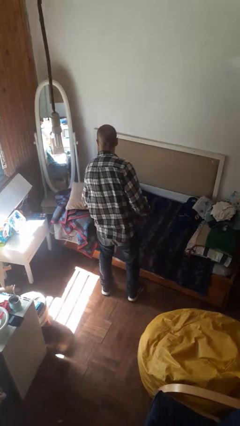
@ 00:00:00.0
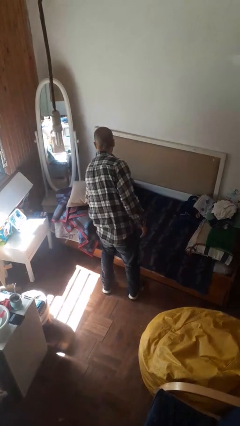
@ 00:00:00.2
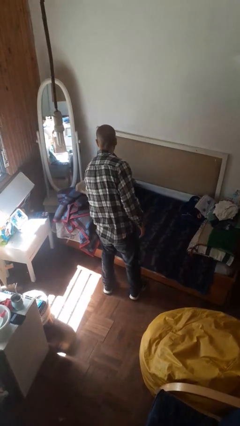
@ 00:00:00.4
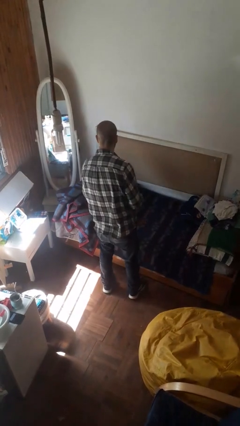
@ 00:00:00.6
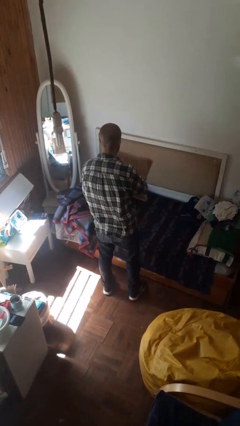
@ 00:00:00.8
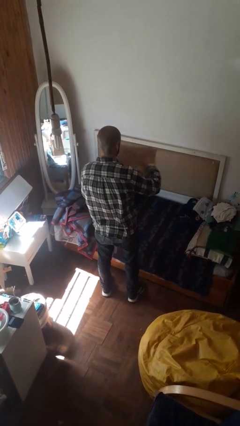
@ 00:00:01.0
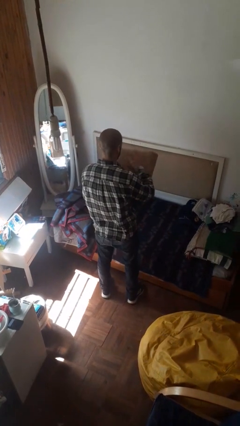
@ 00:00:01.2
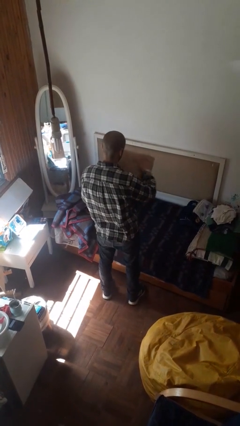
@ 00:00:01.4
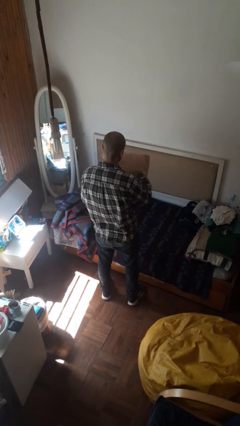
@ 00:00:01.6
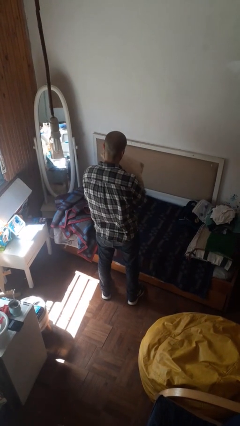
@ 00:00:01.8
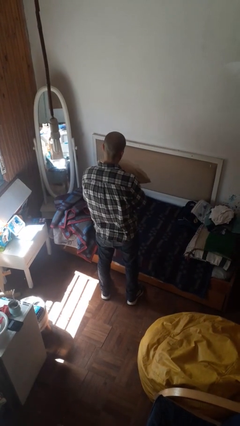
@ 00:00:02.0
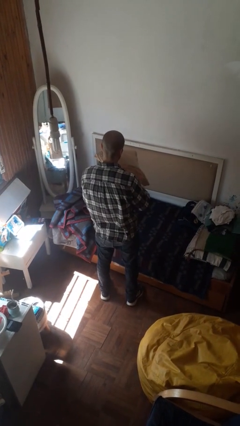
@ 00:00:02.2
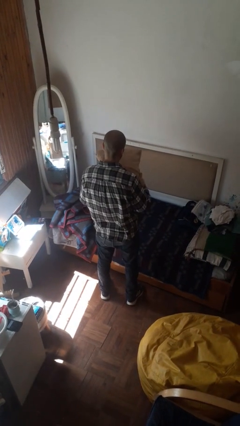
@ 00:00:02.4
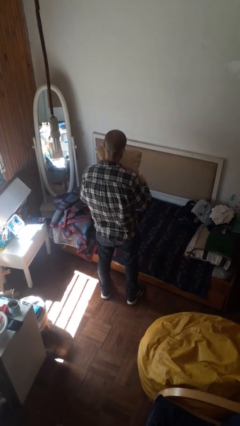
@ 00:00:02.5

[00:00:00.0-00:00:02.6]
person picks up object from bed

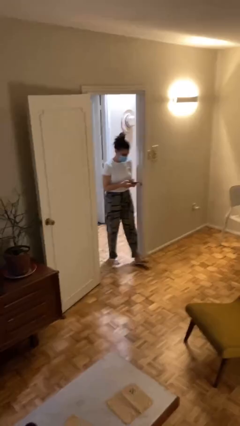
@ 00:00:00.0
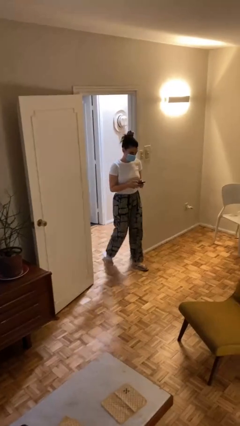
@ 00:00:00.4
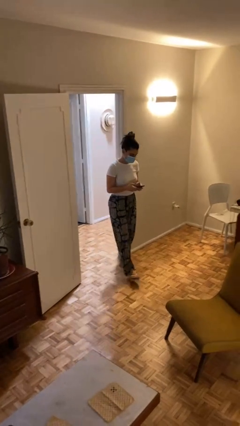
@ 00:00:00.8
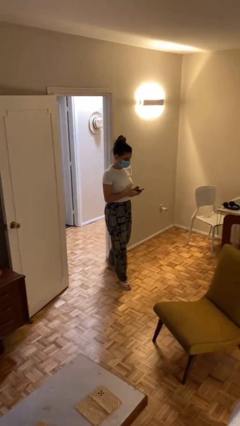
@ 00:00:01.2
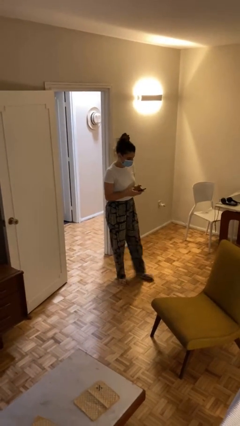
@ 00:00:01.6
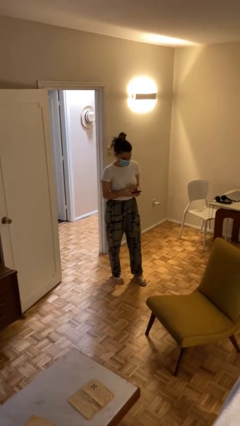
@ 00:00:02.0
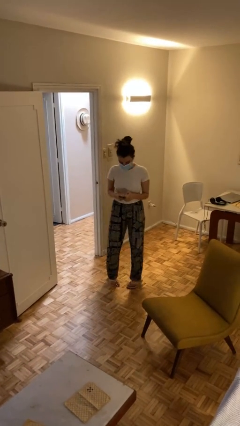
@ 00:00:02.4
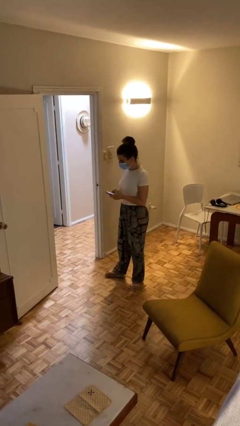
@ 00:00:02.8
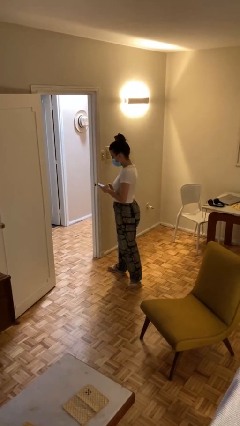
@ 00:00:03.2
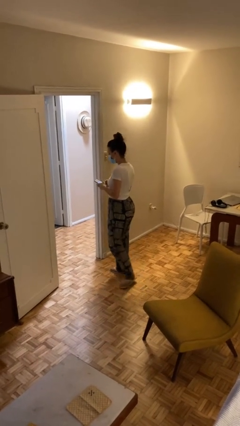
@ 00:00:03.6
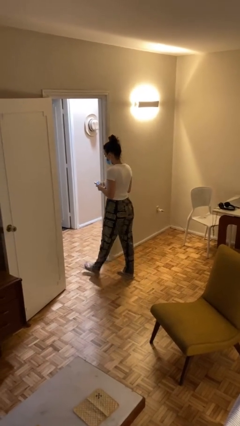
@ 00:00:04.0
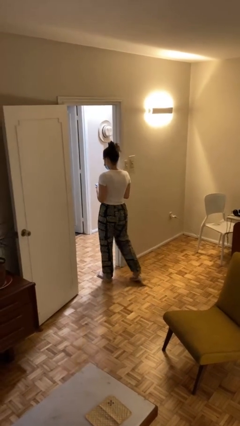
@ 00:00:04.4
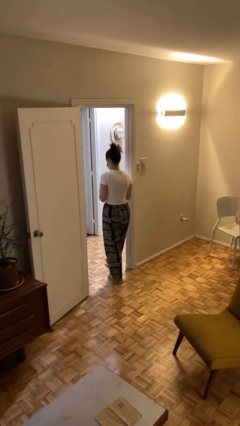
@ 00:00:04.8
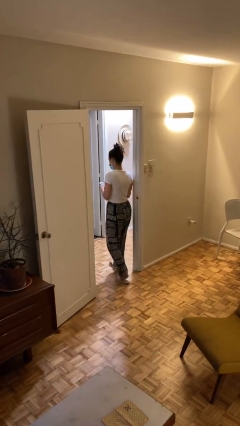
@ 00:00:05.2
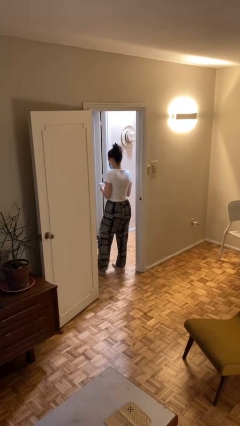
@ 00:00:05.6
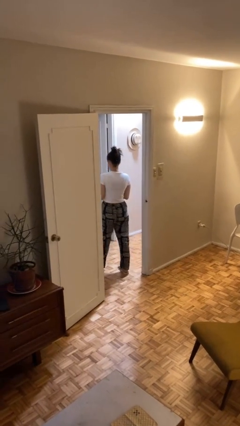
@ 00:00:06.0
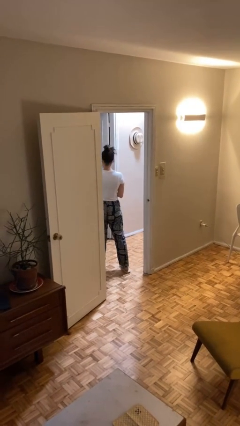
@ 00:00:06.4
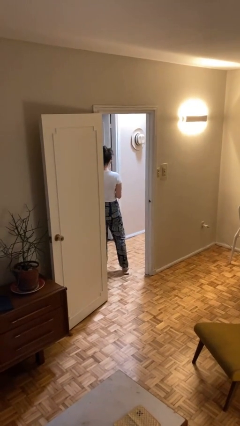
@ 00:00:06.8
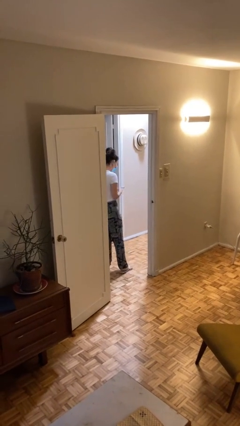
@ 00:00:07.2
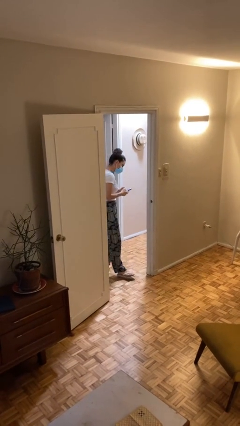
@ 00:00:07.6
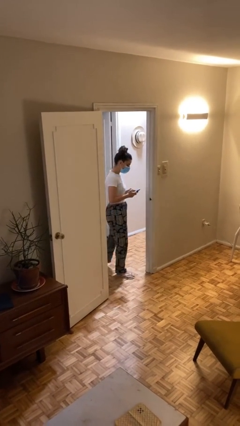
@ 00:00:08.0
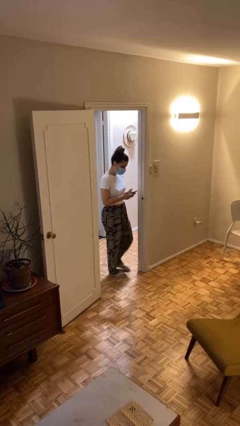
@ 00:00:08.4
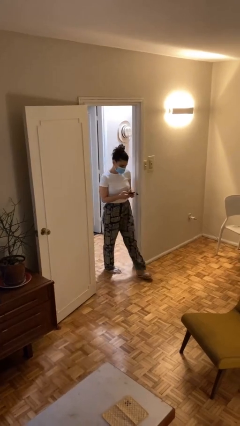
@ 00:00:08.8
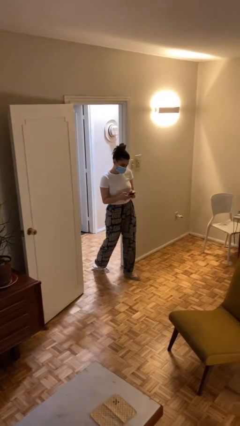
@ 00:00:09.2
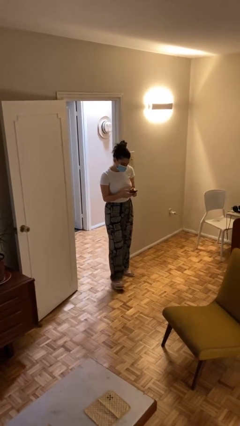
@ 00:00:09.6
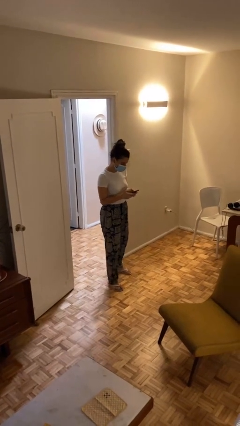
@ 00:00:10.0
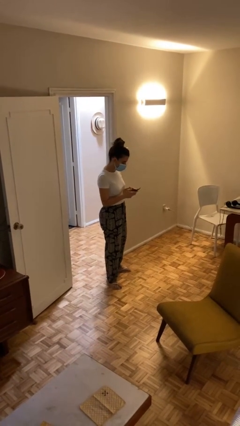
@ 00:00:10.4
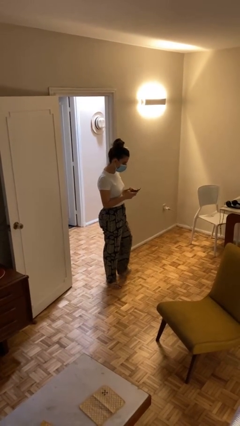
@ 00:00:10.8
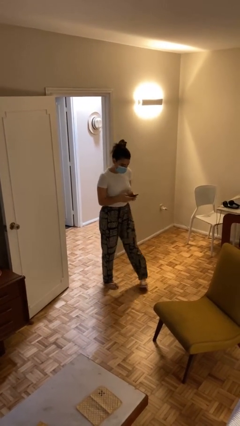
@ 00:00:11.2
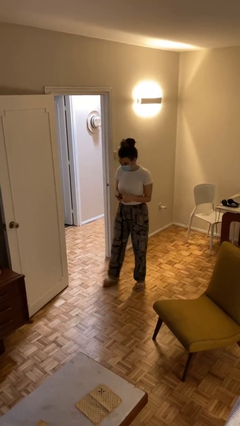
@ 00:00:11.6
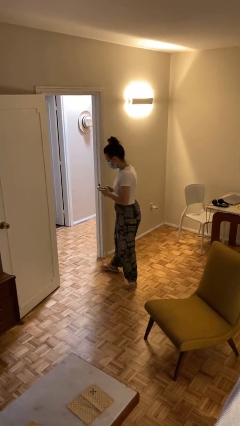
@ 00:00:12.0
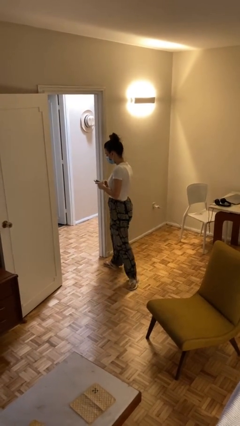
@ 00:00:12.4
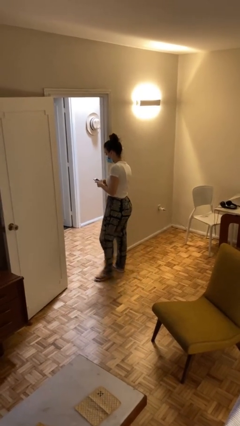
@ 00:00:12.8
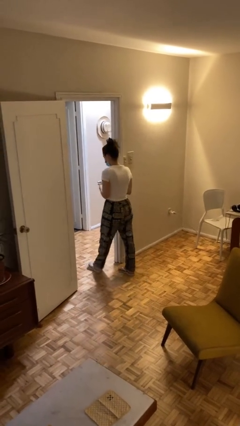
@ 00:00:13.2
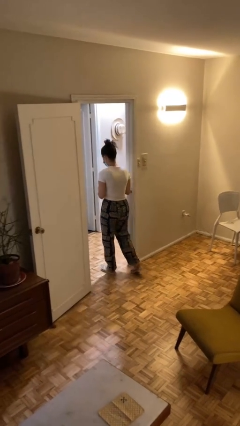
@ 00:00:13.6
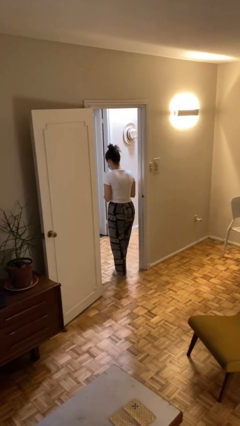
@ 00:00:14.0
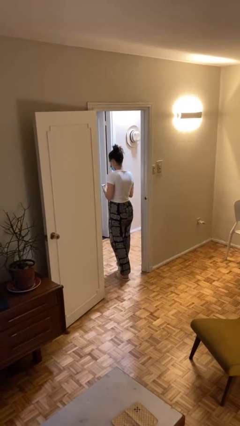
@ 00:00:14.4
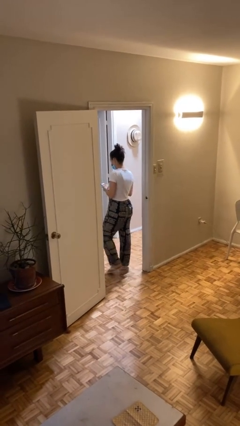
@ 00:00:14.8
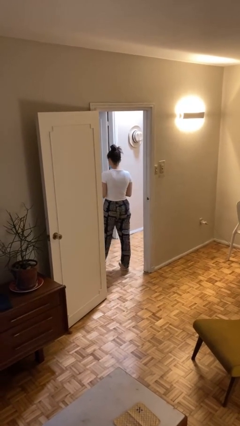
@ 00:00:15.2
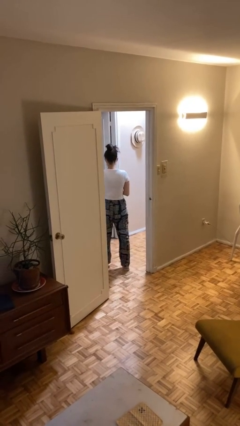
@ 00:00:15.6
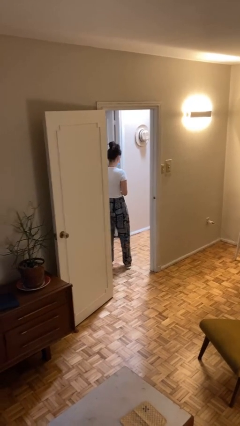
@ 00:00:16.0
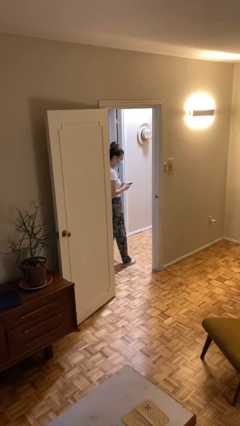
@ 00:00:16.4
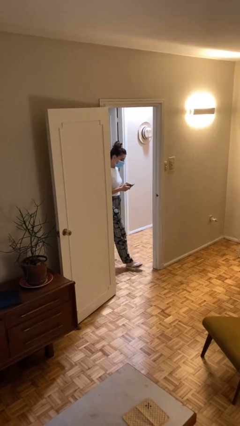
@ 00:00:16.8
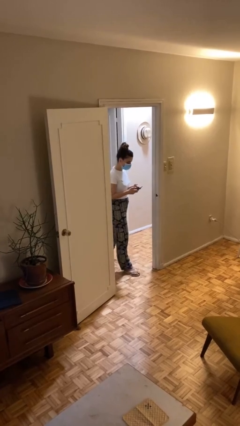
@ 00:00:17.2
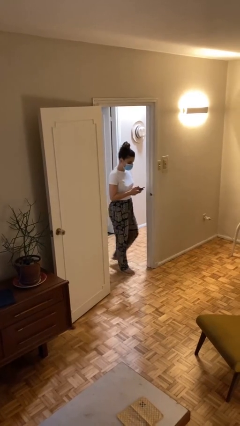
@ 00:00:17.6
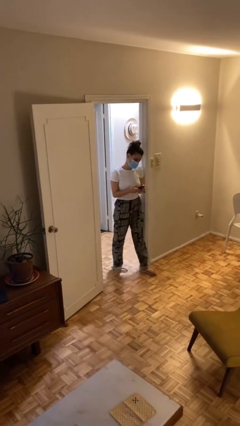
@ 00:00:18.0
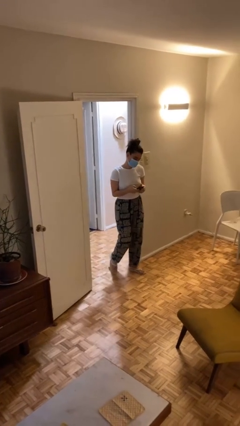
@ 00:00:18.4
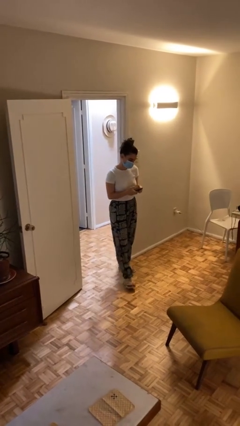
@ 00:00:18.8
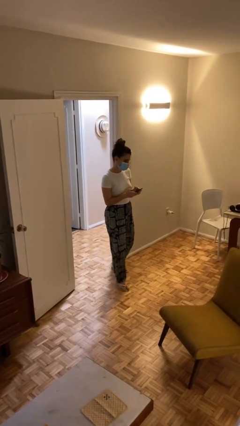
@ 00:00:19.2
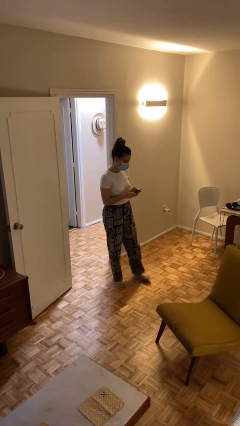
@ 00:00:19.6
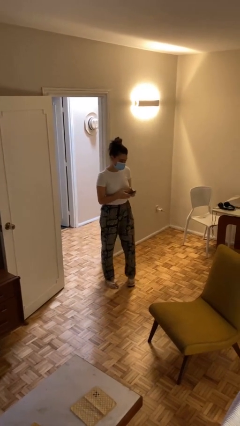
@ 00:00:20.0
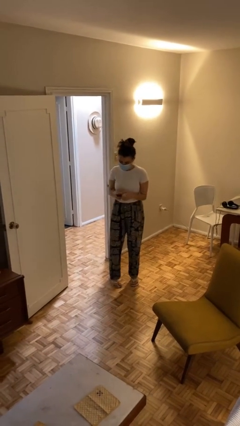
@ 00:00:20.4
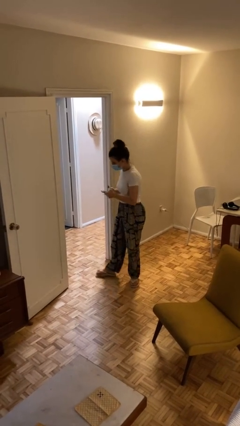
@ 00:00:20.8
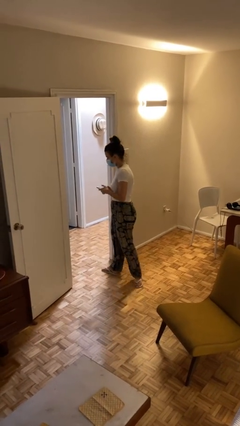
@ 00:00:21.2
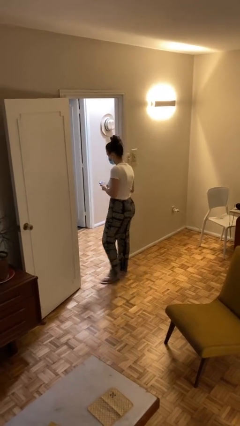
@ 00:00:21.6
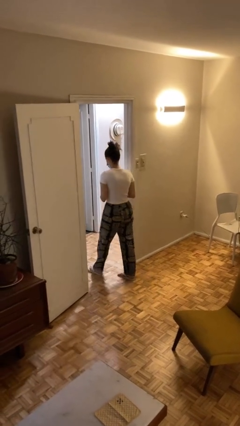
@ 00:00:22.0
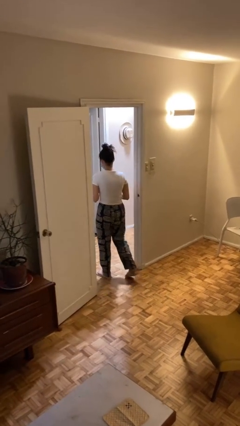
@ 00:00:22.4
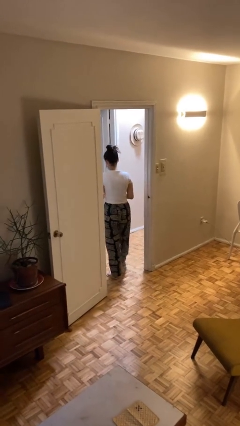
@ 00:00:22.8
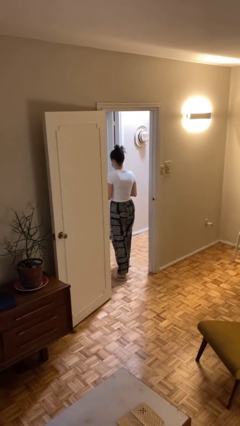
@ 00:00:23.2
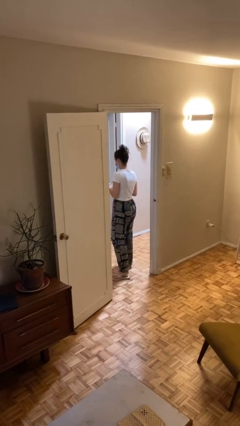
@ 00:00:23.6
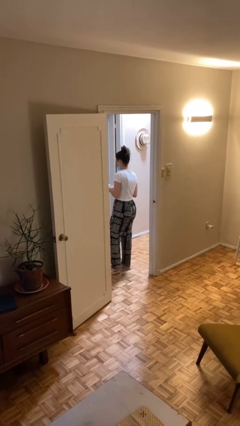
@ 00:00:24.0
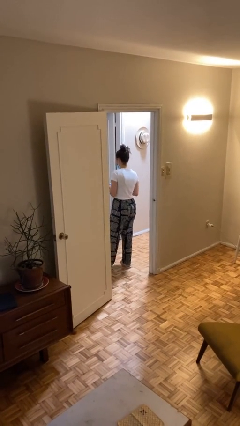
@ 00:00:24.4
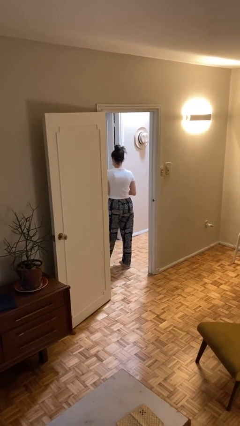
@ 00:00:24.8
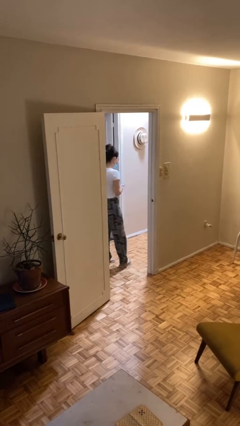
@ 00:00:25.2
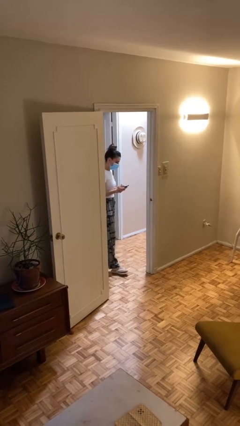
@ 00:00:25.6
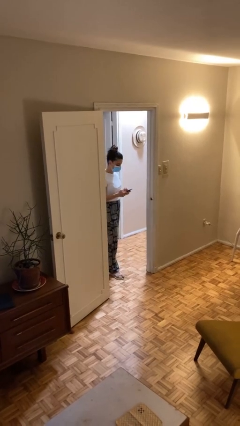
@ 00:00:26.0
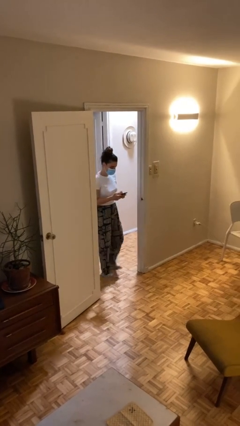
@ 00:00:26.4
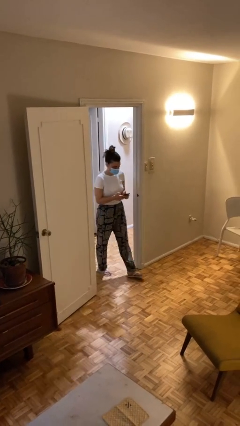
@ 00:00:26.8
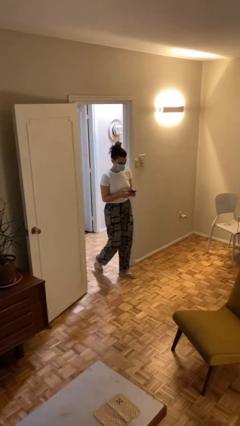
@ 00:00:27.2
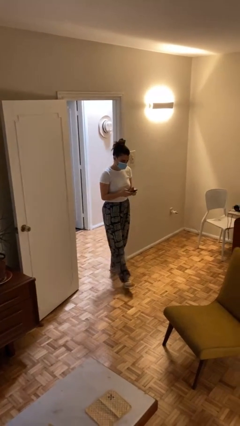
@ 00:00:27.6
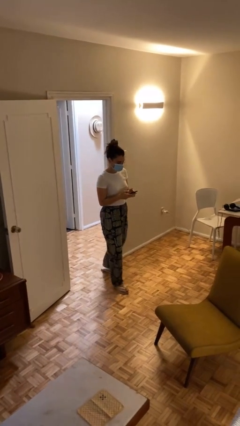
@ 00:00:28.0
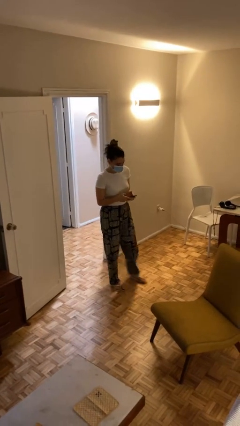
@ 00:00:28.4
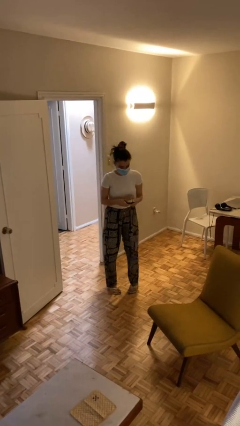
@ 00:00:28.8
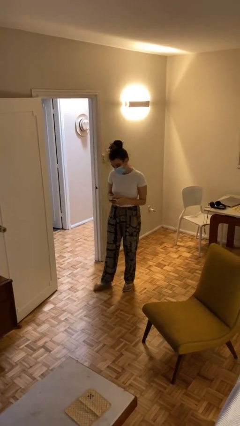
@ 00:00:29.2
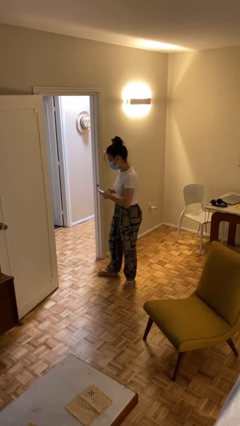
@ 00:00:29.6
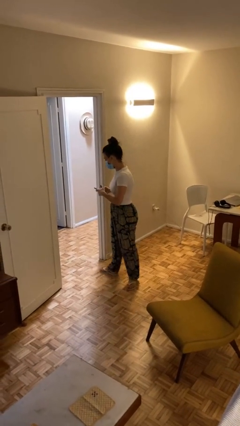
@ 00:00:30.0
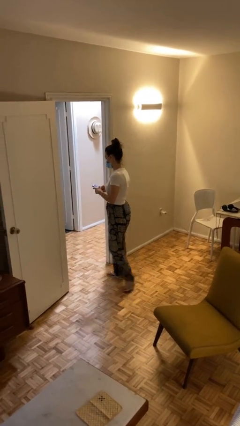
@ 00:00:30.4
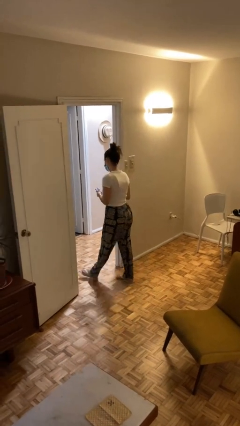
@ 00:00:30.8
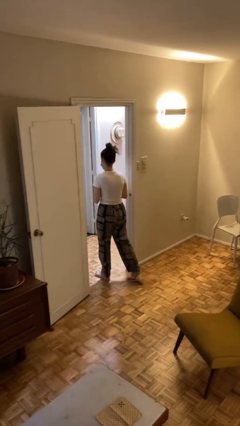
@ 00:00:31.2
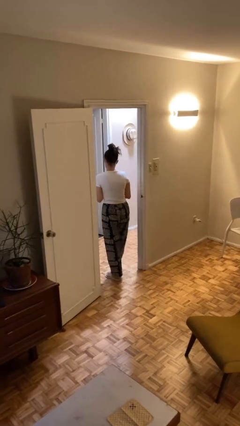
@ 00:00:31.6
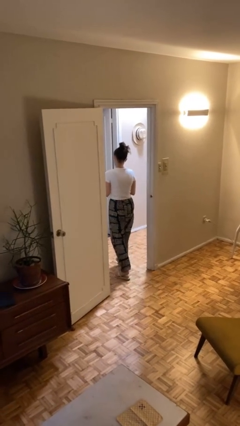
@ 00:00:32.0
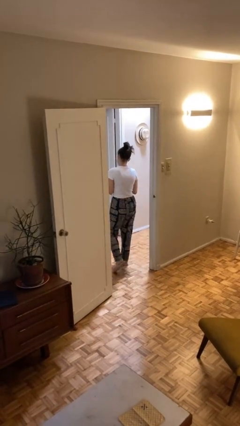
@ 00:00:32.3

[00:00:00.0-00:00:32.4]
person texts on phone
